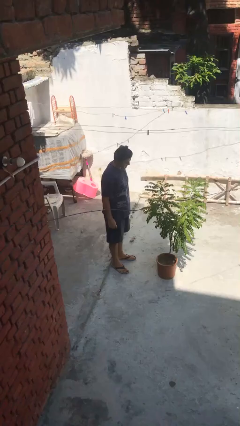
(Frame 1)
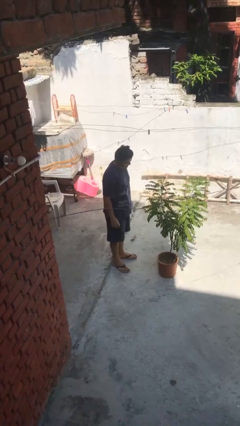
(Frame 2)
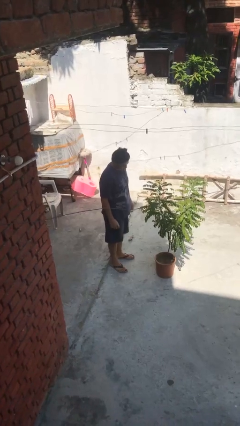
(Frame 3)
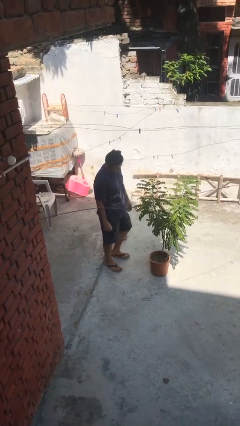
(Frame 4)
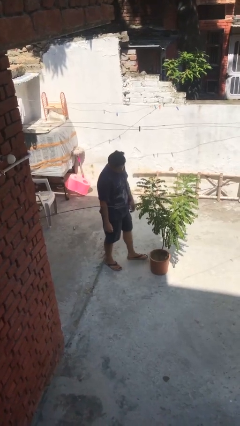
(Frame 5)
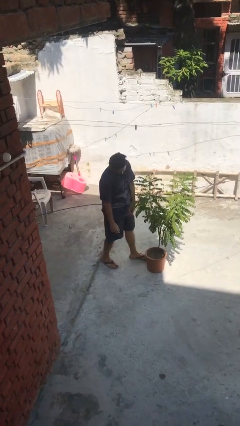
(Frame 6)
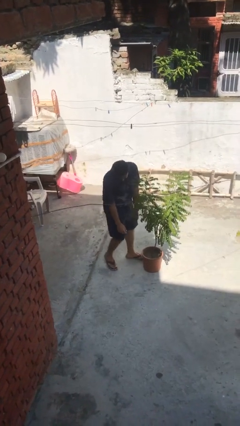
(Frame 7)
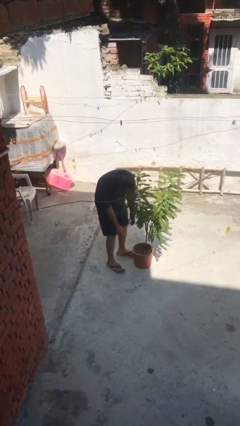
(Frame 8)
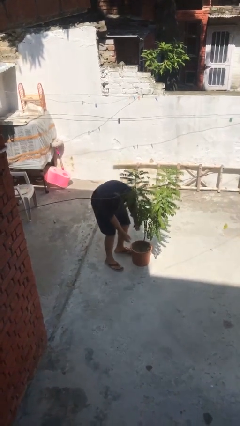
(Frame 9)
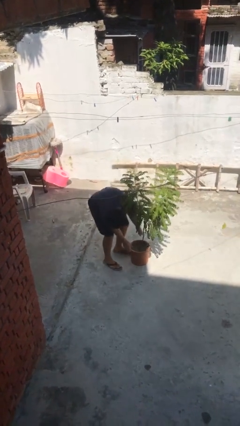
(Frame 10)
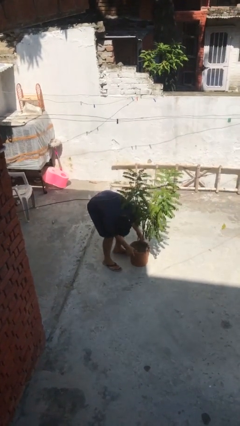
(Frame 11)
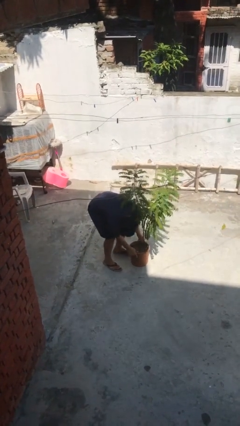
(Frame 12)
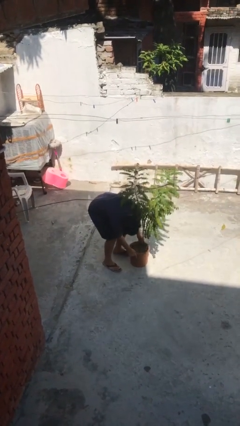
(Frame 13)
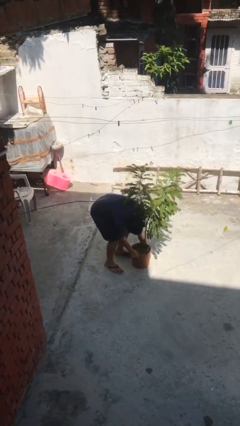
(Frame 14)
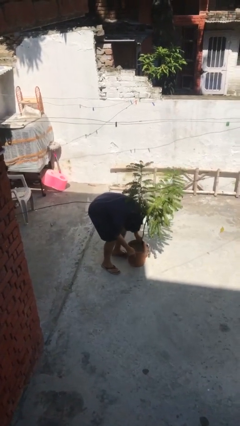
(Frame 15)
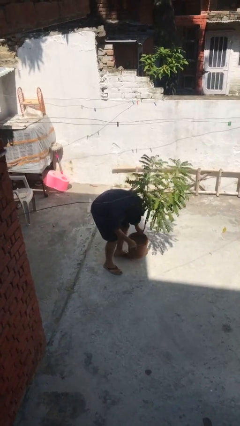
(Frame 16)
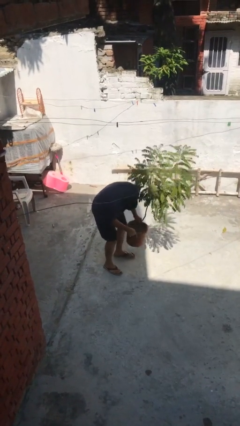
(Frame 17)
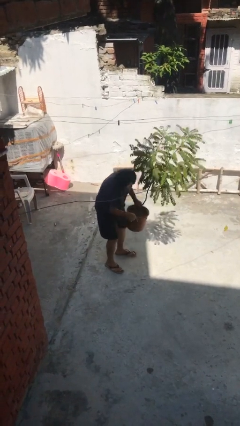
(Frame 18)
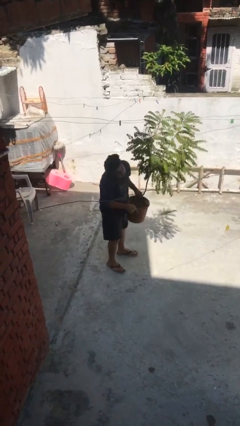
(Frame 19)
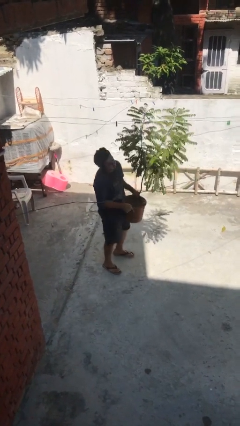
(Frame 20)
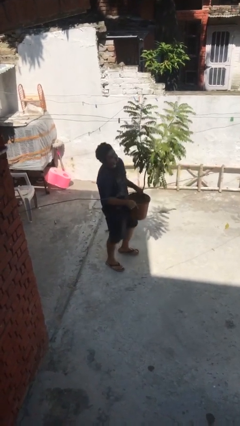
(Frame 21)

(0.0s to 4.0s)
person picks up object from floor

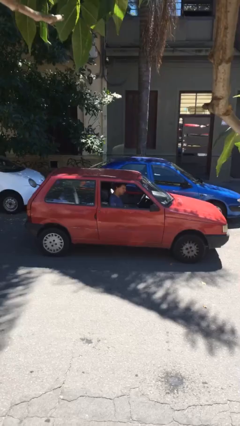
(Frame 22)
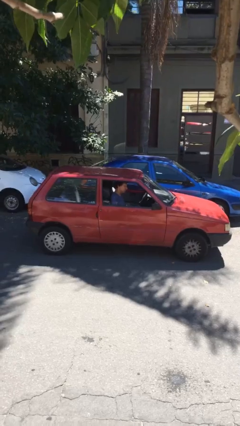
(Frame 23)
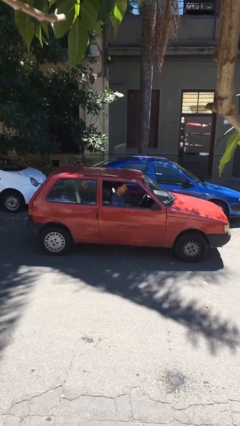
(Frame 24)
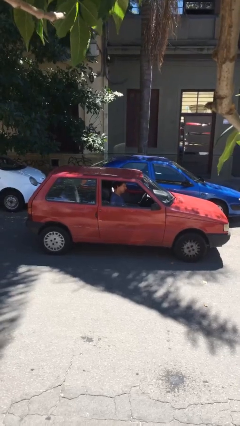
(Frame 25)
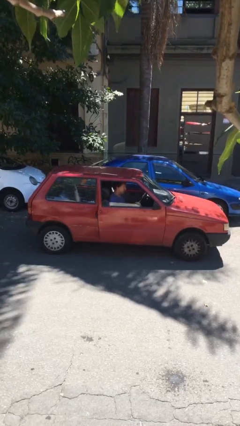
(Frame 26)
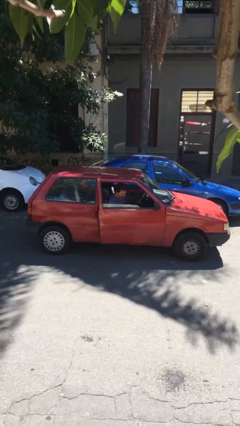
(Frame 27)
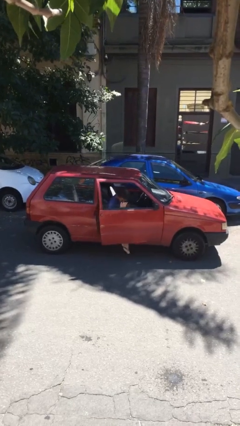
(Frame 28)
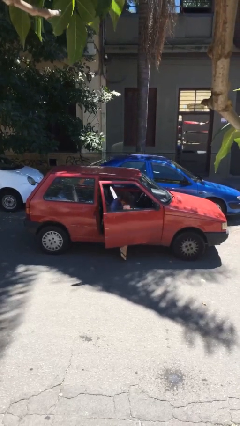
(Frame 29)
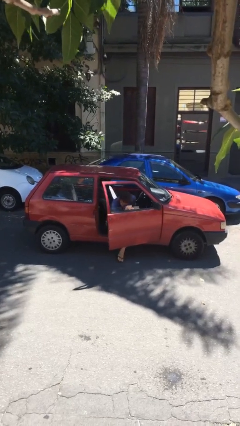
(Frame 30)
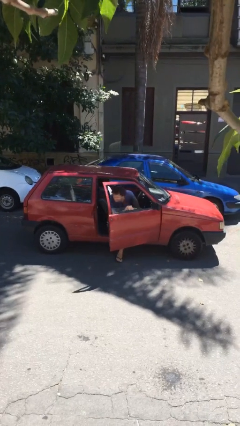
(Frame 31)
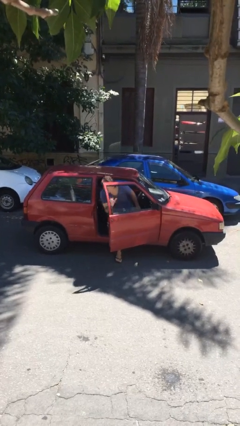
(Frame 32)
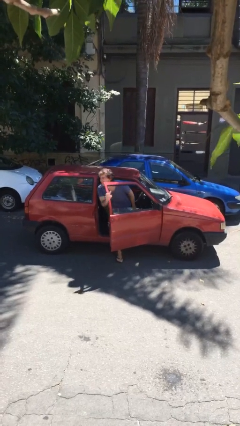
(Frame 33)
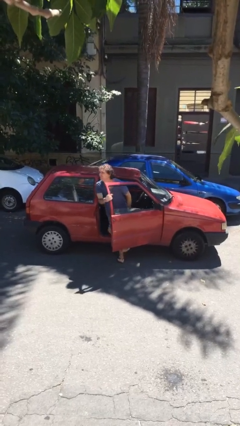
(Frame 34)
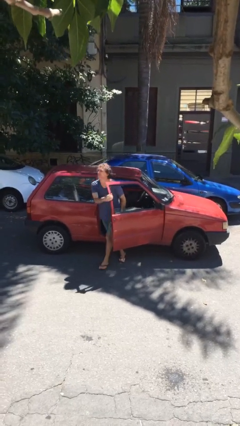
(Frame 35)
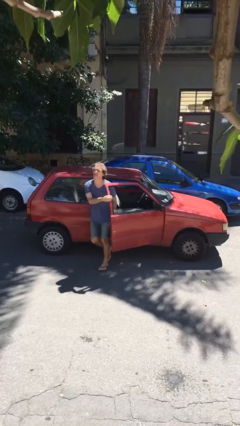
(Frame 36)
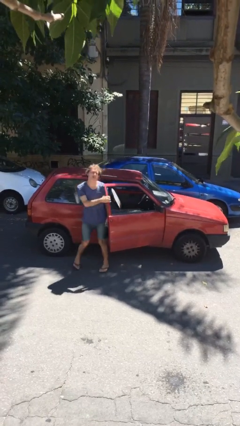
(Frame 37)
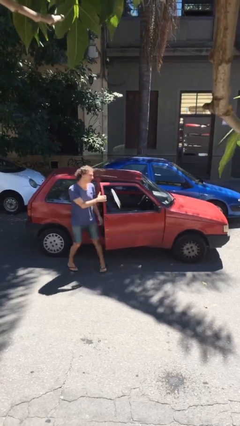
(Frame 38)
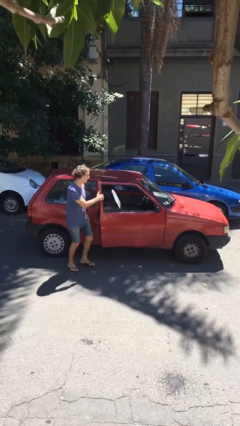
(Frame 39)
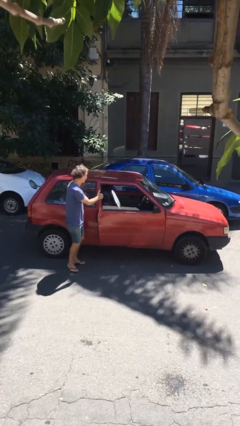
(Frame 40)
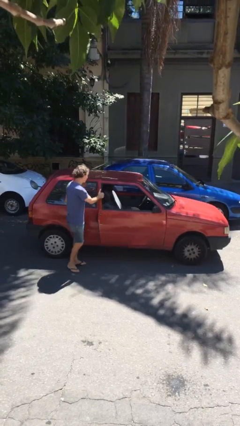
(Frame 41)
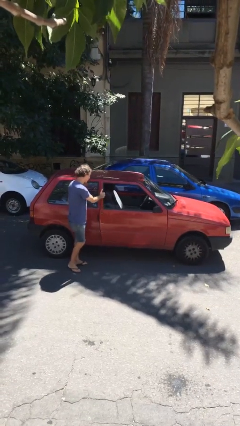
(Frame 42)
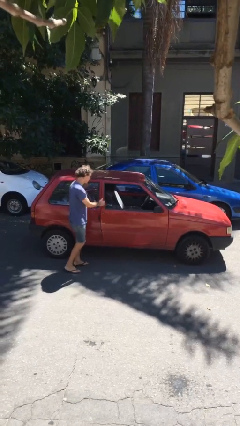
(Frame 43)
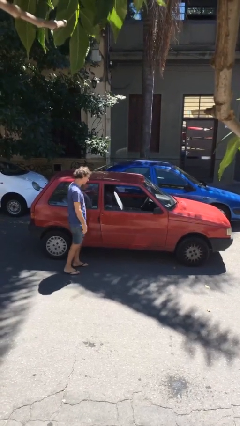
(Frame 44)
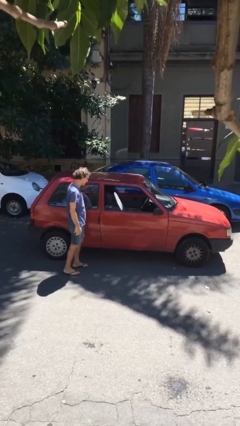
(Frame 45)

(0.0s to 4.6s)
car drops off person

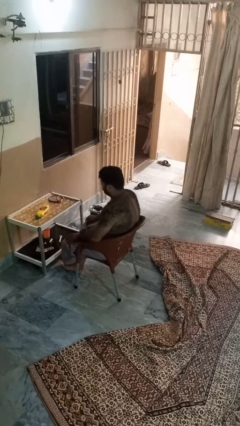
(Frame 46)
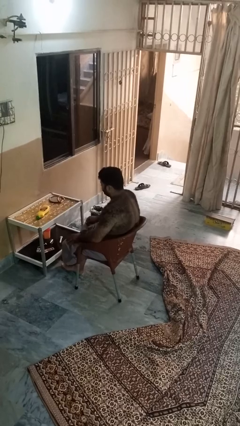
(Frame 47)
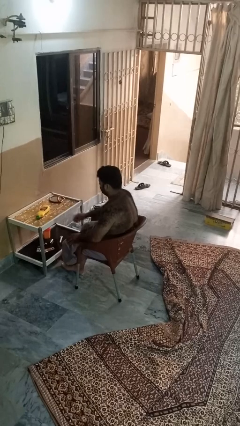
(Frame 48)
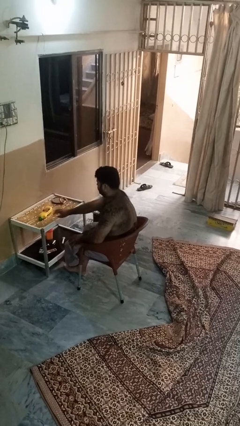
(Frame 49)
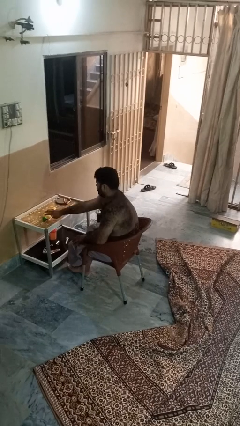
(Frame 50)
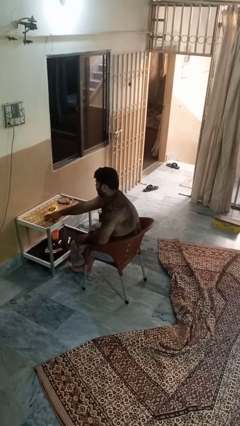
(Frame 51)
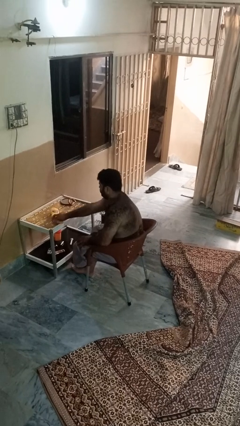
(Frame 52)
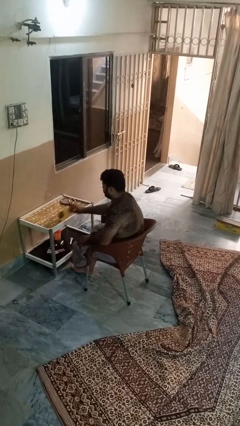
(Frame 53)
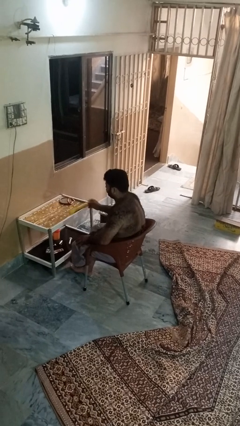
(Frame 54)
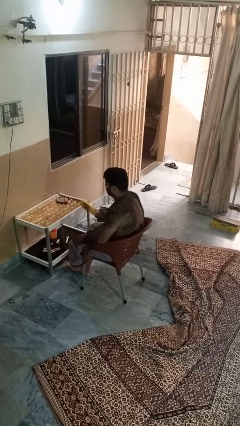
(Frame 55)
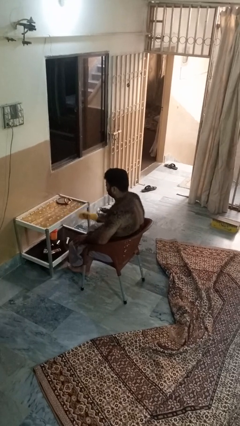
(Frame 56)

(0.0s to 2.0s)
person picks up object from table

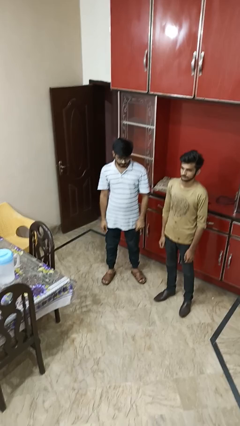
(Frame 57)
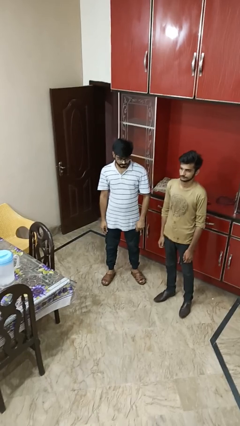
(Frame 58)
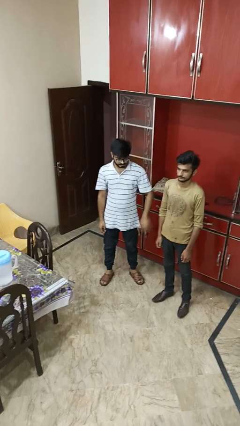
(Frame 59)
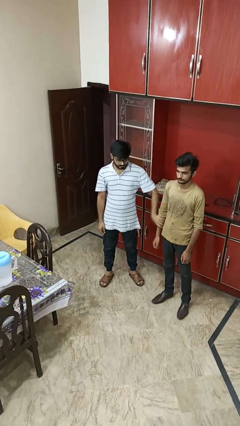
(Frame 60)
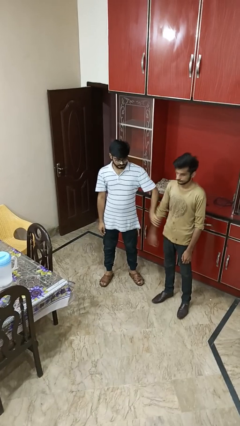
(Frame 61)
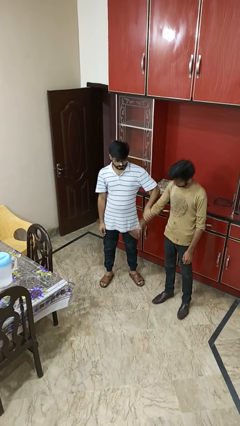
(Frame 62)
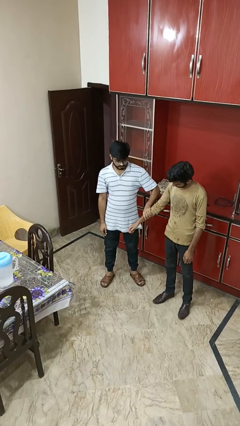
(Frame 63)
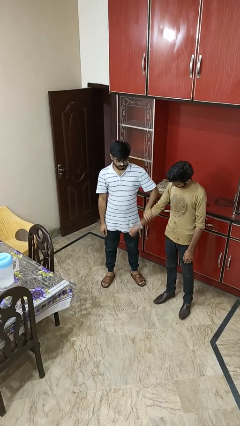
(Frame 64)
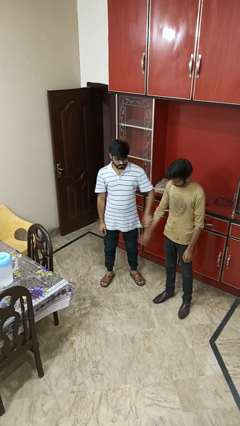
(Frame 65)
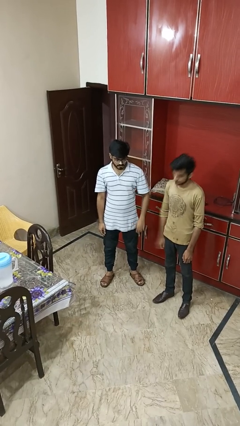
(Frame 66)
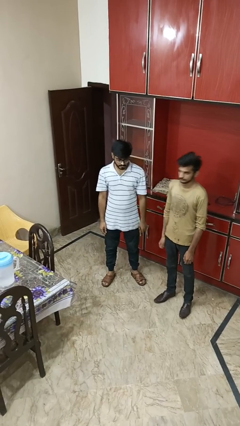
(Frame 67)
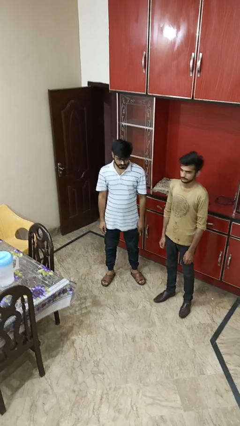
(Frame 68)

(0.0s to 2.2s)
person grabs person by forearm

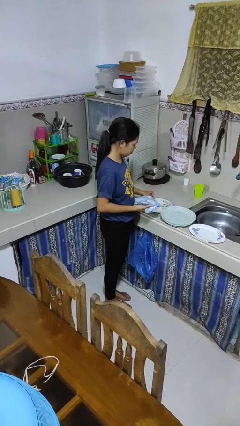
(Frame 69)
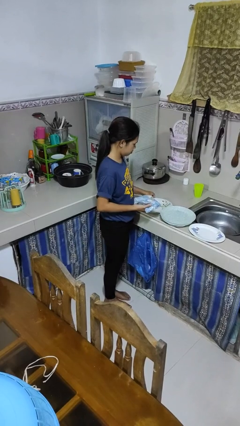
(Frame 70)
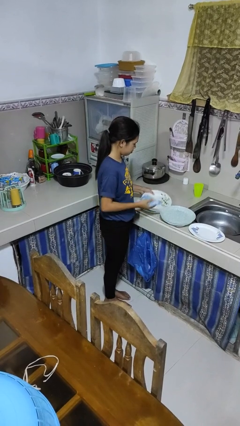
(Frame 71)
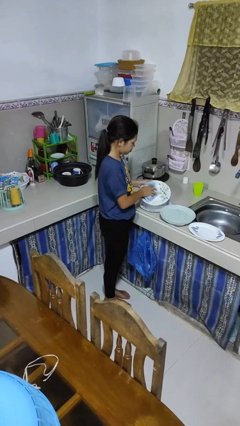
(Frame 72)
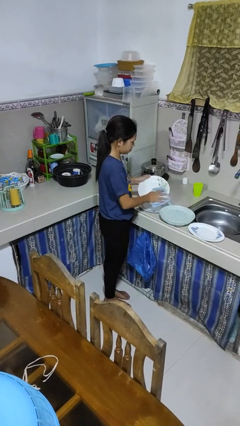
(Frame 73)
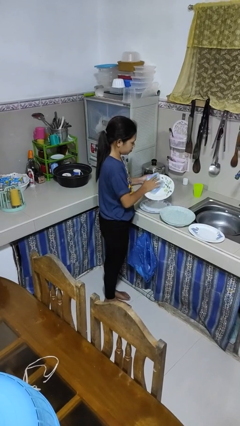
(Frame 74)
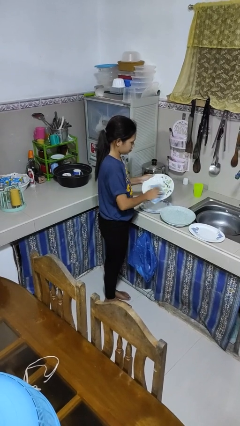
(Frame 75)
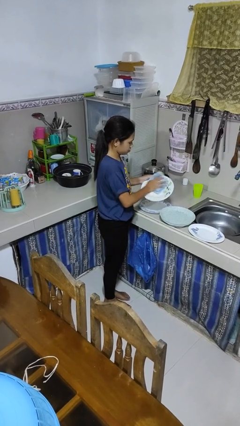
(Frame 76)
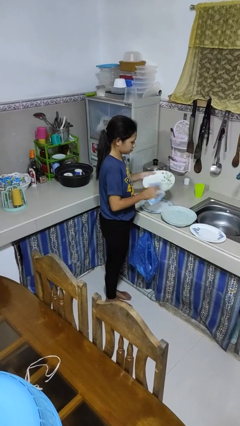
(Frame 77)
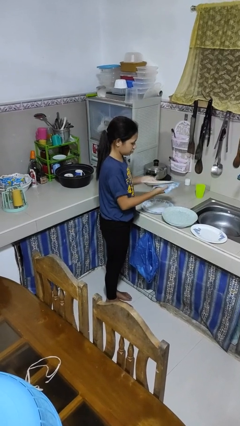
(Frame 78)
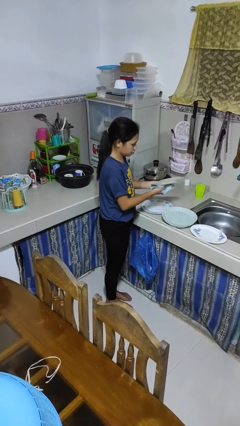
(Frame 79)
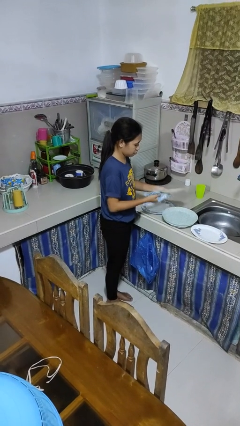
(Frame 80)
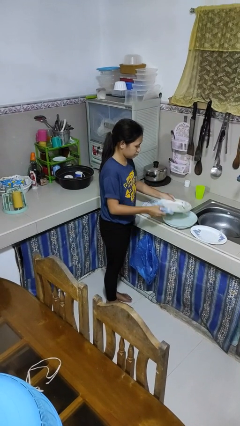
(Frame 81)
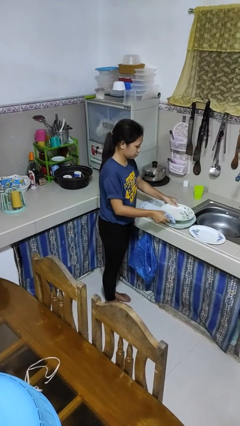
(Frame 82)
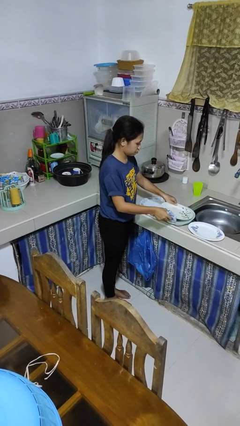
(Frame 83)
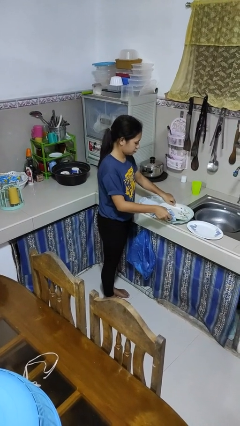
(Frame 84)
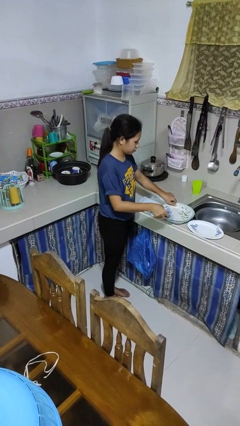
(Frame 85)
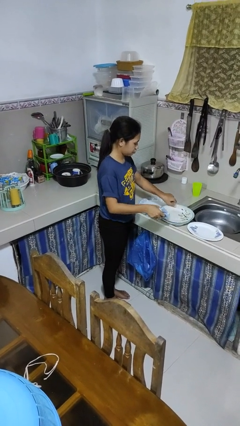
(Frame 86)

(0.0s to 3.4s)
person dries dish

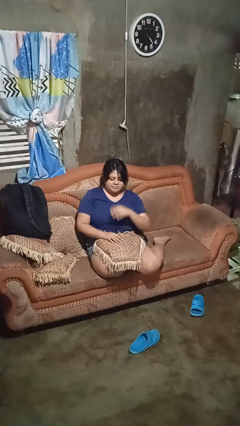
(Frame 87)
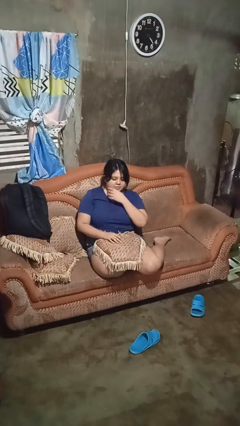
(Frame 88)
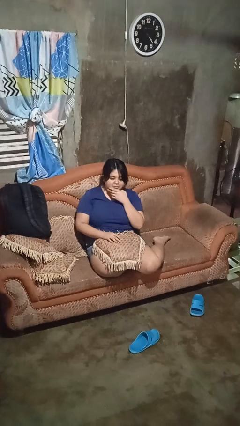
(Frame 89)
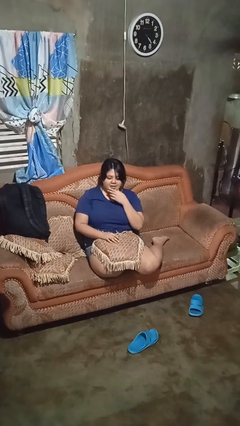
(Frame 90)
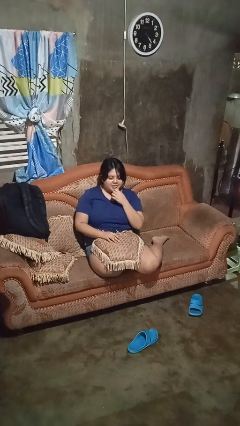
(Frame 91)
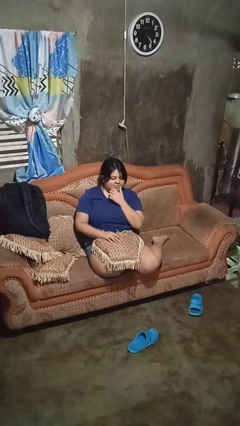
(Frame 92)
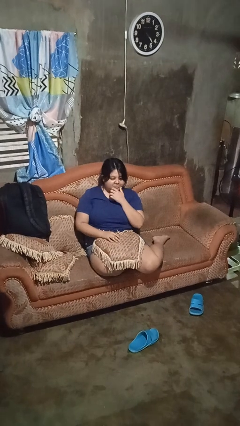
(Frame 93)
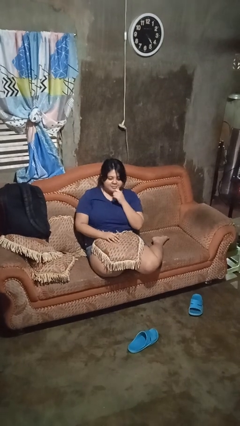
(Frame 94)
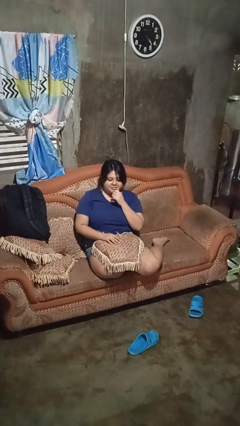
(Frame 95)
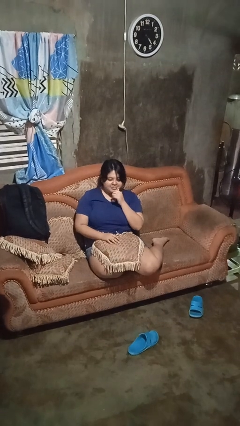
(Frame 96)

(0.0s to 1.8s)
person strokes chin
